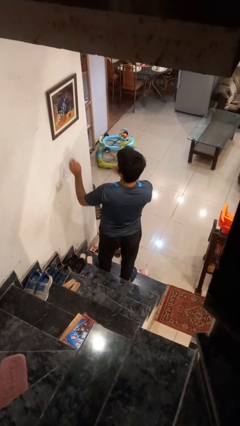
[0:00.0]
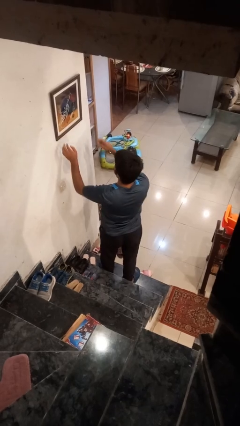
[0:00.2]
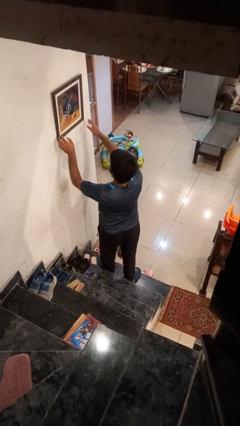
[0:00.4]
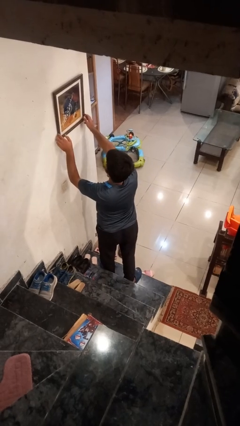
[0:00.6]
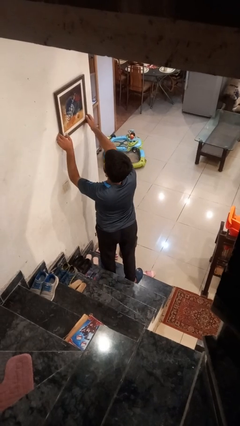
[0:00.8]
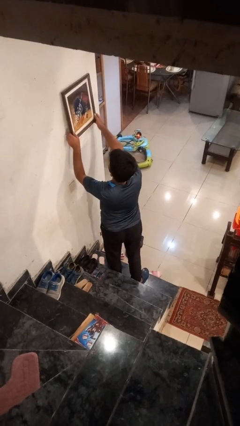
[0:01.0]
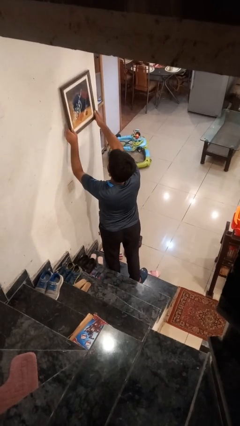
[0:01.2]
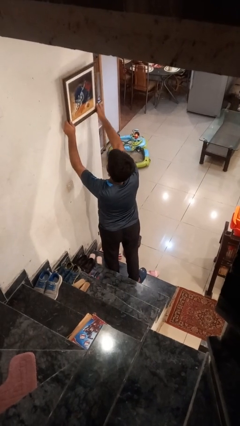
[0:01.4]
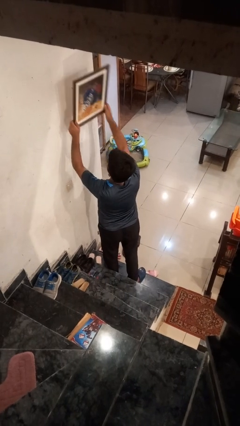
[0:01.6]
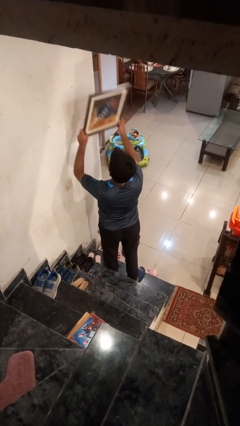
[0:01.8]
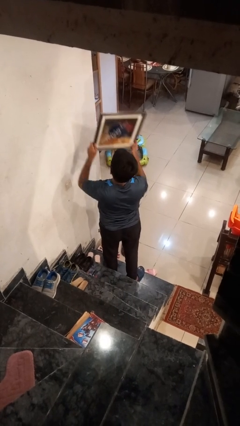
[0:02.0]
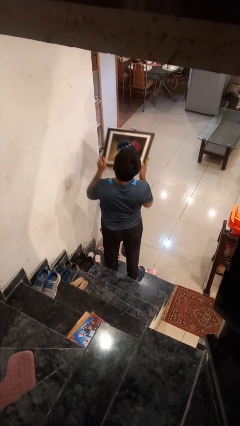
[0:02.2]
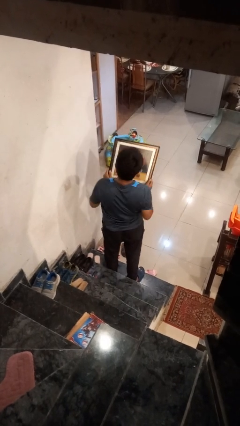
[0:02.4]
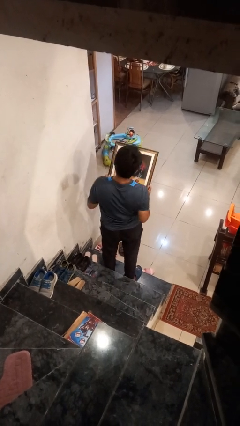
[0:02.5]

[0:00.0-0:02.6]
person takes down picture frame

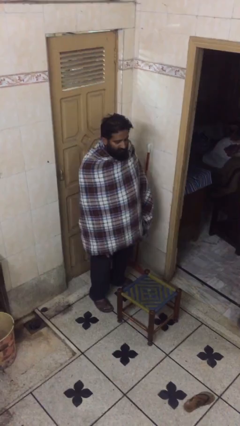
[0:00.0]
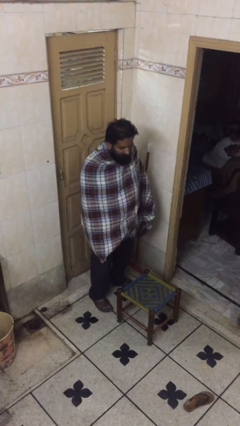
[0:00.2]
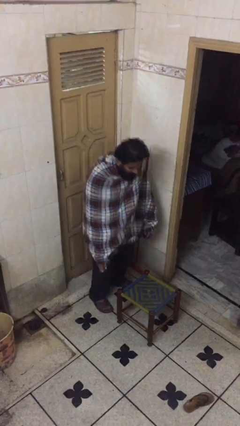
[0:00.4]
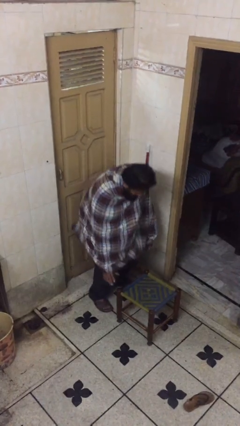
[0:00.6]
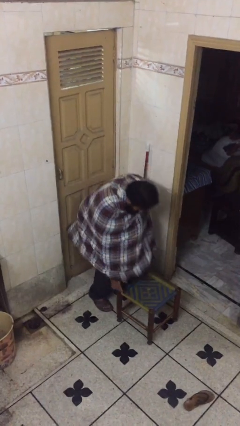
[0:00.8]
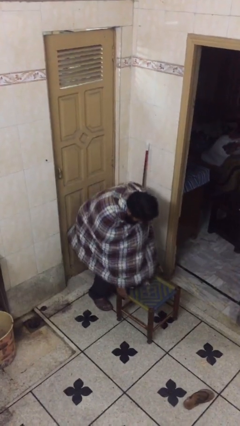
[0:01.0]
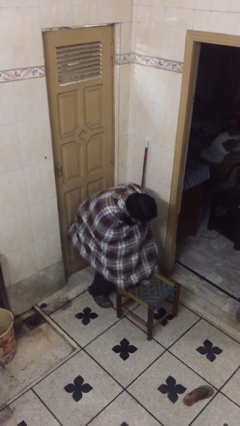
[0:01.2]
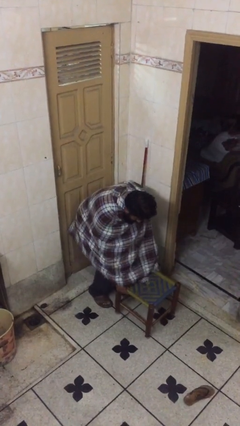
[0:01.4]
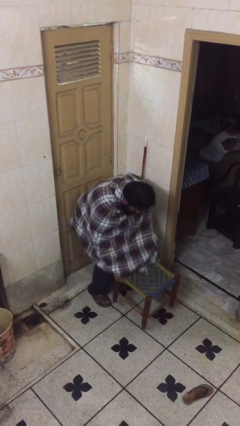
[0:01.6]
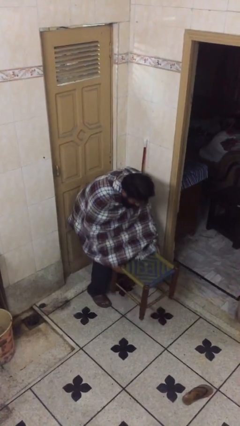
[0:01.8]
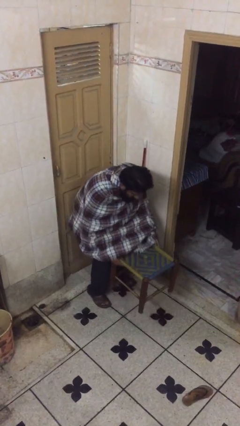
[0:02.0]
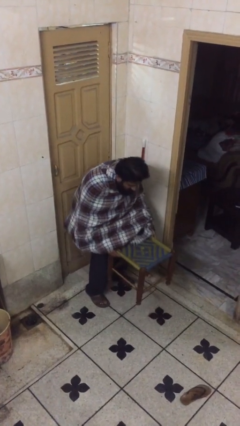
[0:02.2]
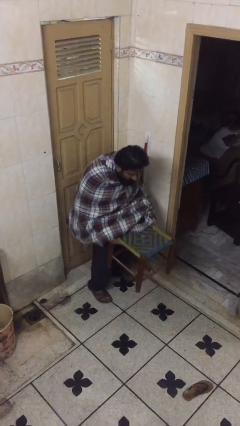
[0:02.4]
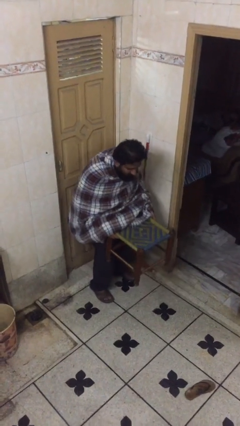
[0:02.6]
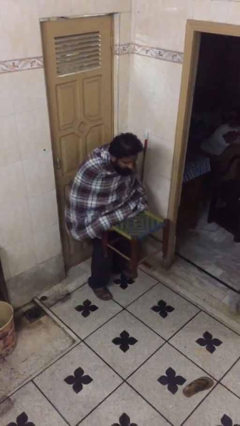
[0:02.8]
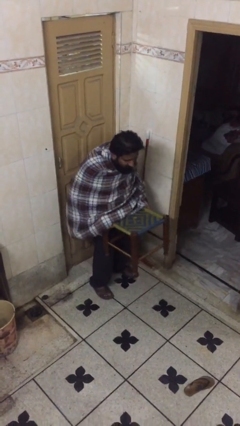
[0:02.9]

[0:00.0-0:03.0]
person picks up object from floor

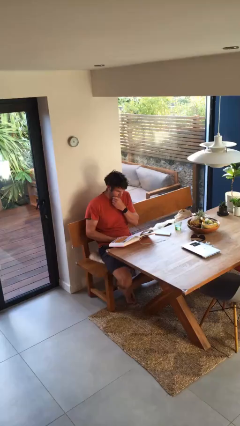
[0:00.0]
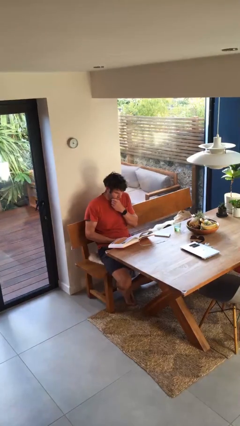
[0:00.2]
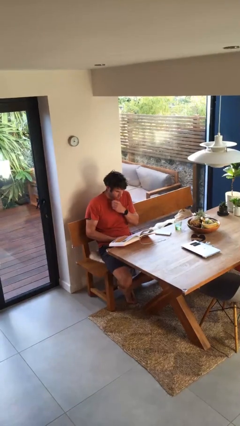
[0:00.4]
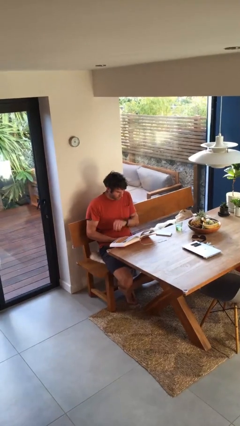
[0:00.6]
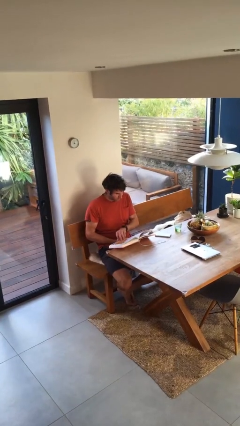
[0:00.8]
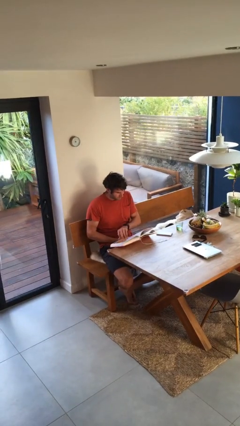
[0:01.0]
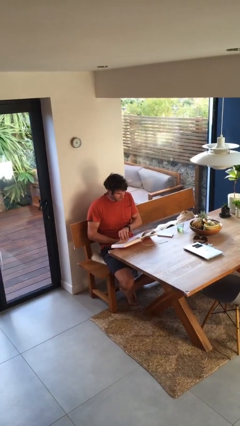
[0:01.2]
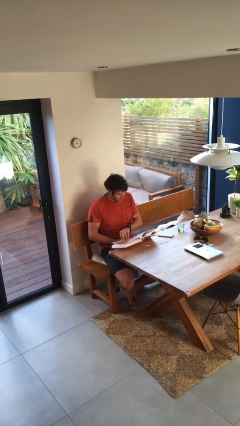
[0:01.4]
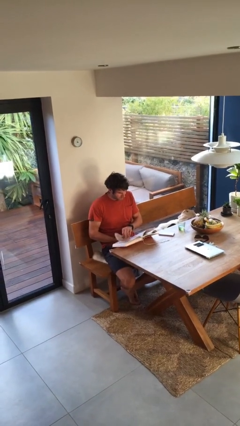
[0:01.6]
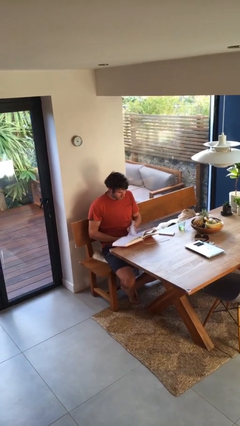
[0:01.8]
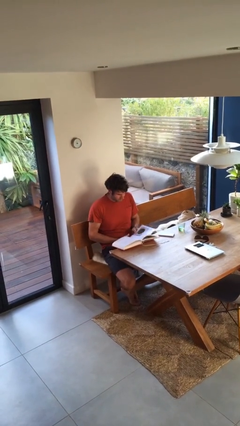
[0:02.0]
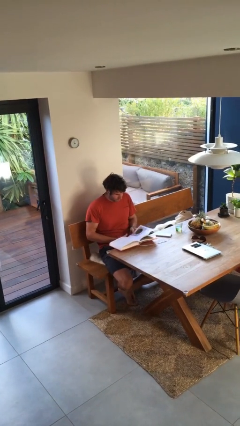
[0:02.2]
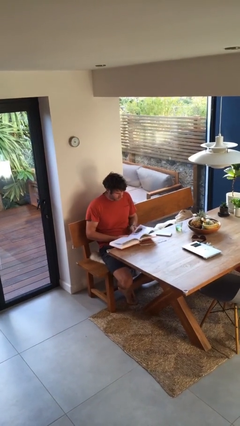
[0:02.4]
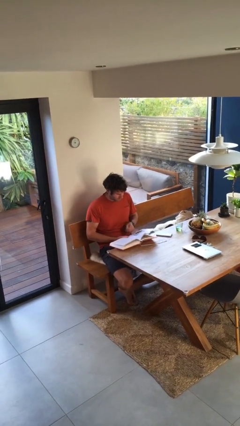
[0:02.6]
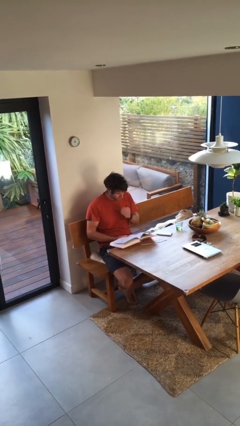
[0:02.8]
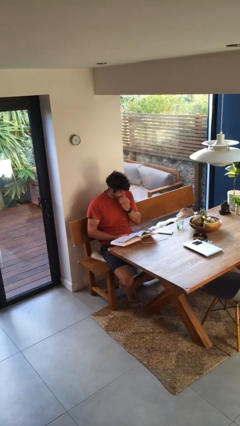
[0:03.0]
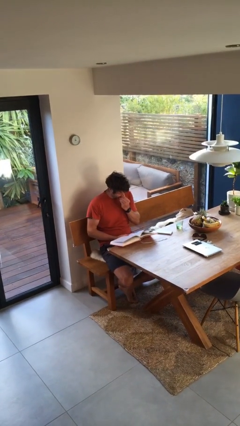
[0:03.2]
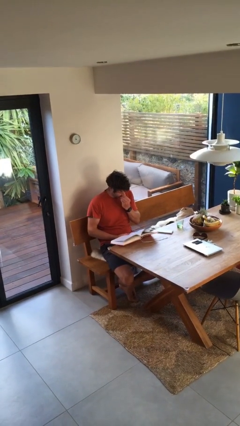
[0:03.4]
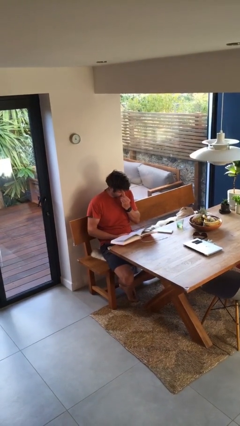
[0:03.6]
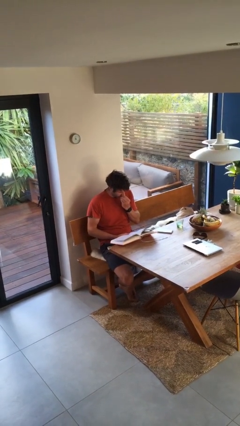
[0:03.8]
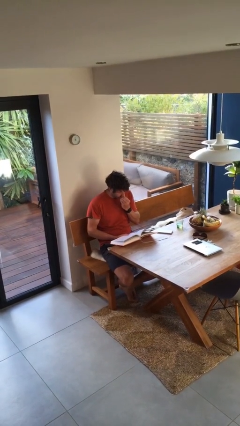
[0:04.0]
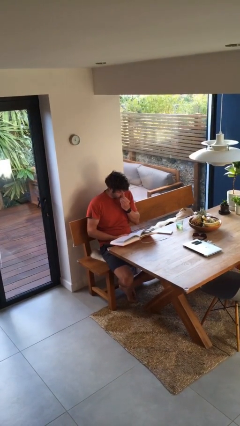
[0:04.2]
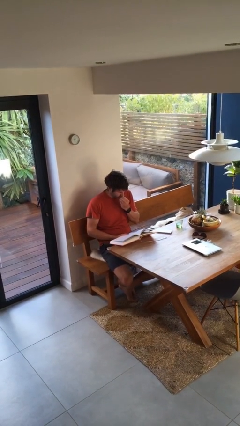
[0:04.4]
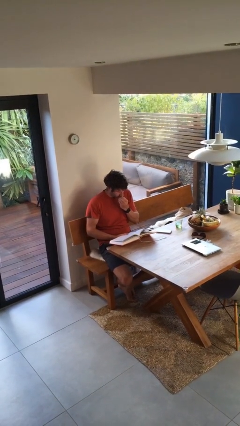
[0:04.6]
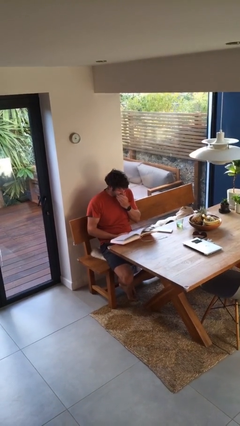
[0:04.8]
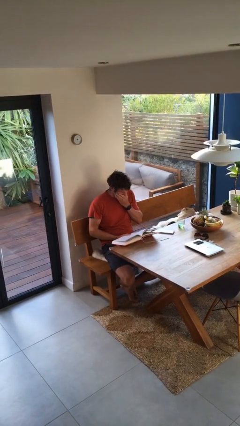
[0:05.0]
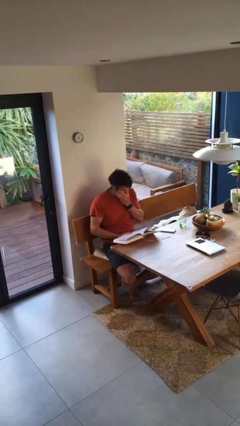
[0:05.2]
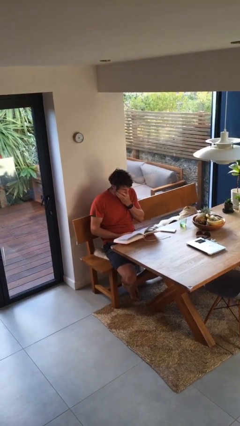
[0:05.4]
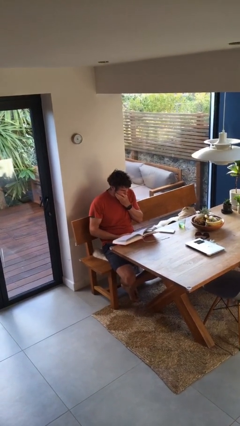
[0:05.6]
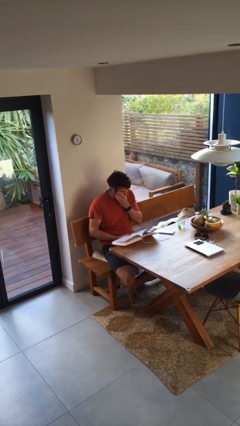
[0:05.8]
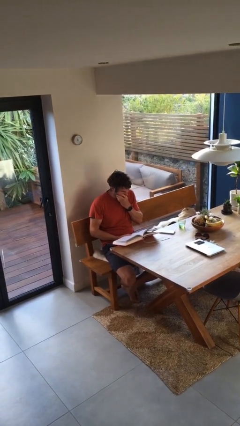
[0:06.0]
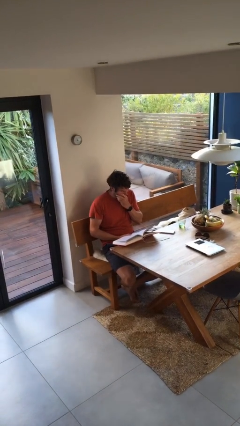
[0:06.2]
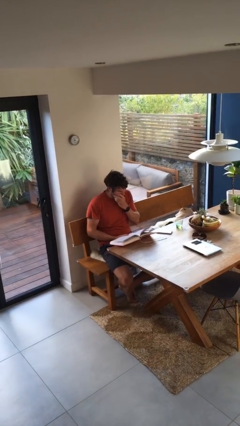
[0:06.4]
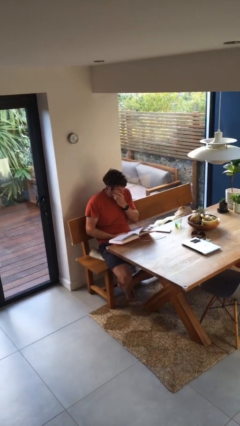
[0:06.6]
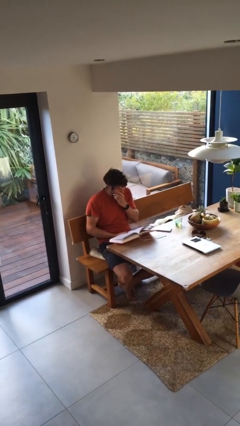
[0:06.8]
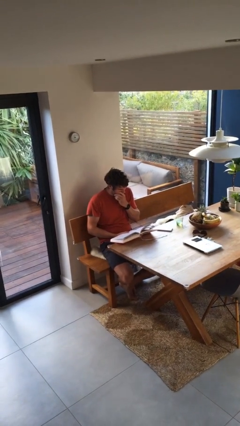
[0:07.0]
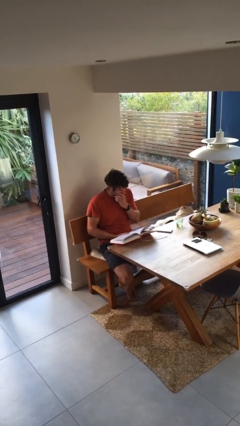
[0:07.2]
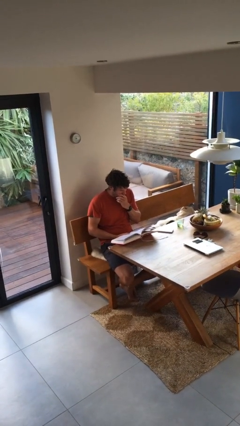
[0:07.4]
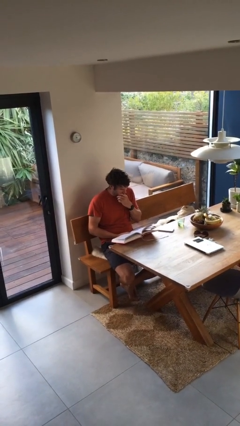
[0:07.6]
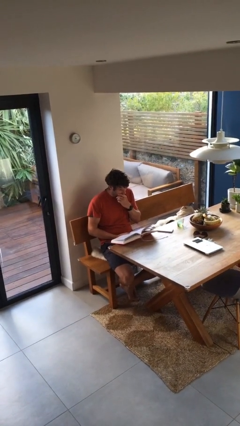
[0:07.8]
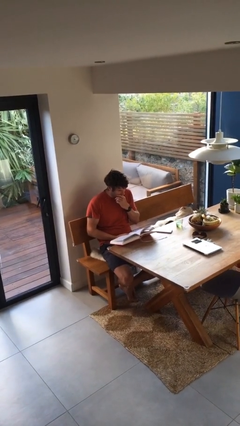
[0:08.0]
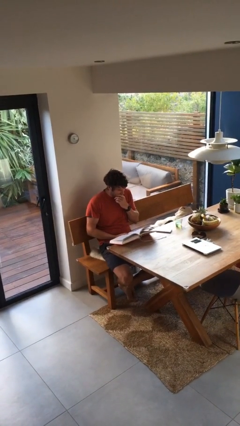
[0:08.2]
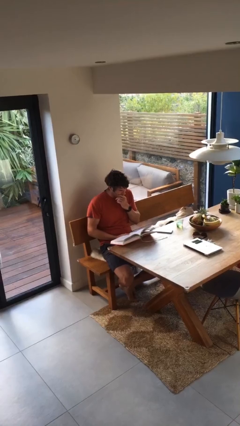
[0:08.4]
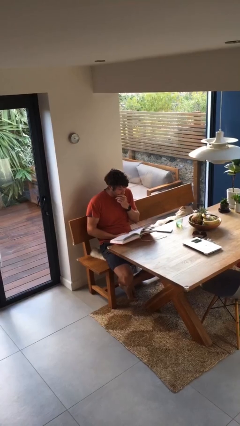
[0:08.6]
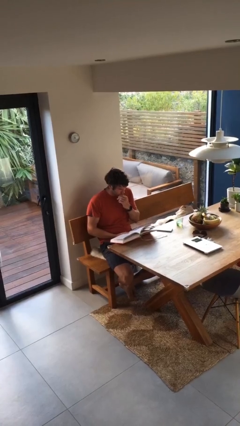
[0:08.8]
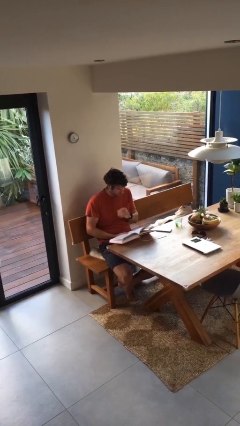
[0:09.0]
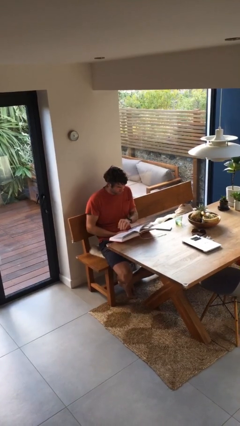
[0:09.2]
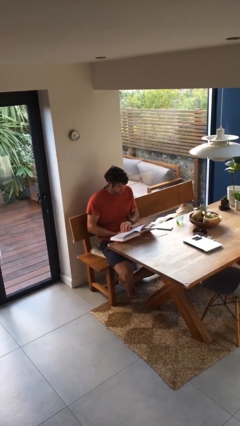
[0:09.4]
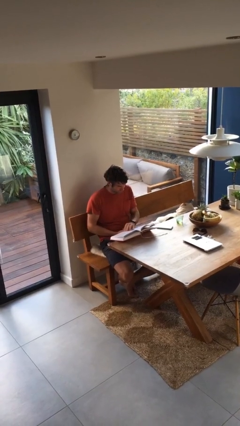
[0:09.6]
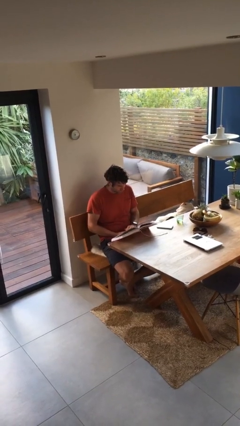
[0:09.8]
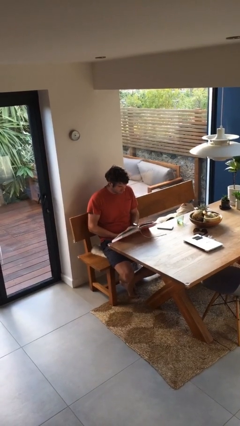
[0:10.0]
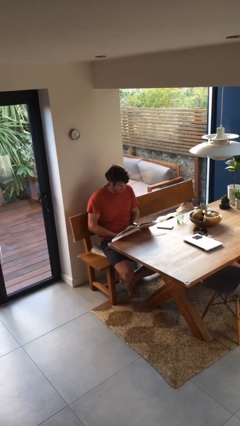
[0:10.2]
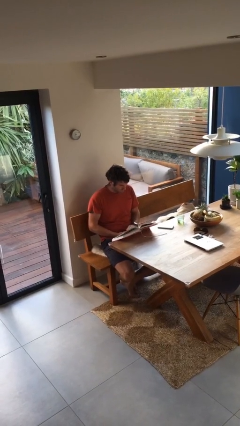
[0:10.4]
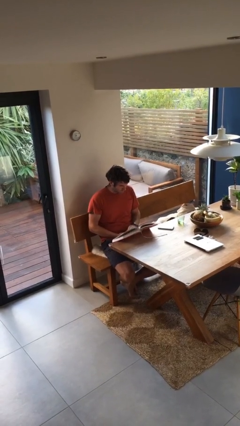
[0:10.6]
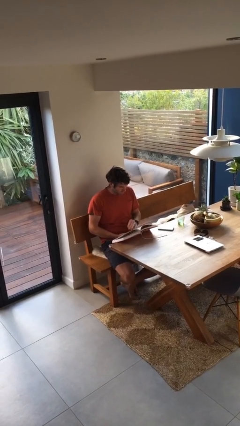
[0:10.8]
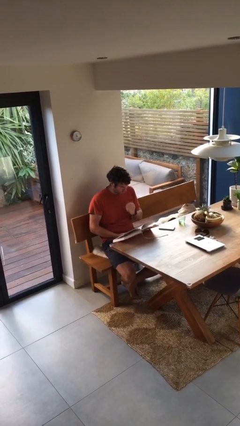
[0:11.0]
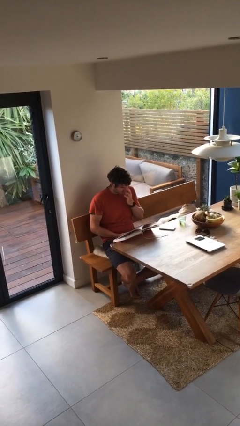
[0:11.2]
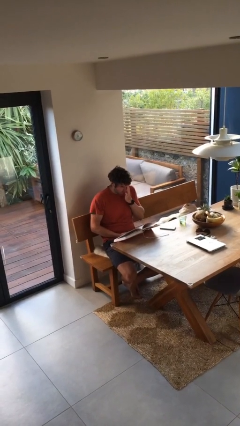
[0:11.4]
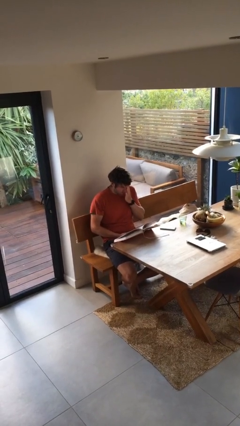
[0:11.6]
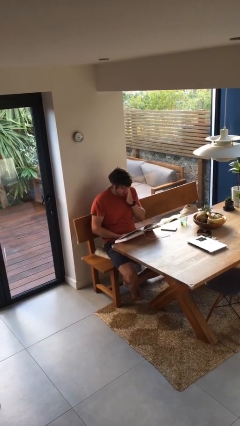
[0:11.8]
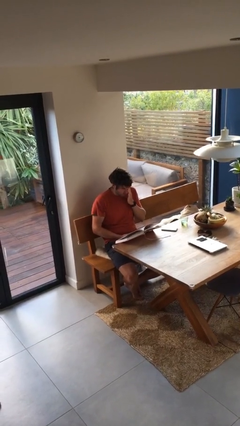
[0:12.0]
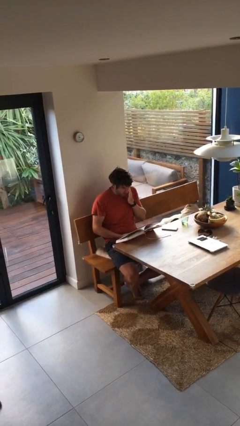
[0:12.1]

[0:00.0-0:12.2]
person reads document
